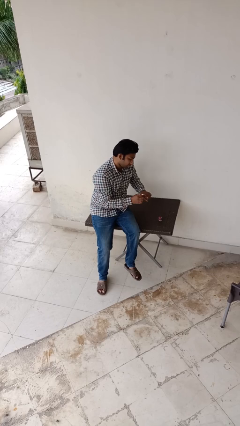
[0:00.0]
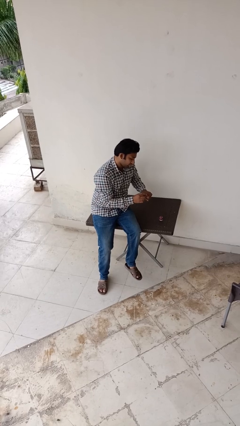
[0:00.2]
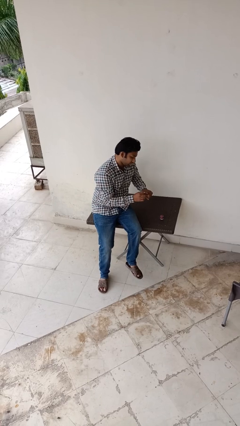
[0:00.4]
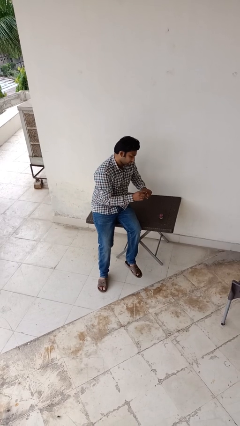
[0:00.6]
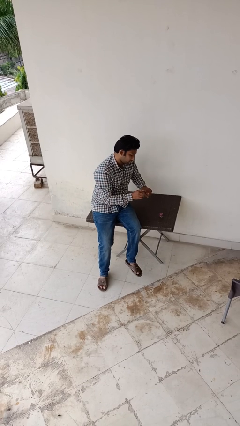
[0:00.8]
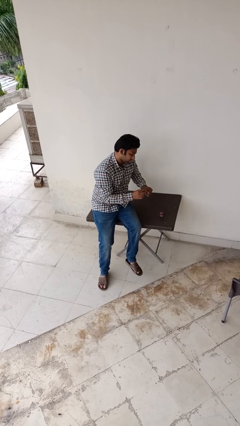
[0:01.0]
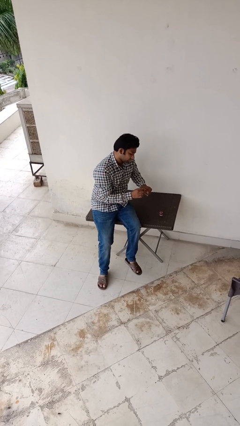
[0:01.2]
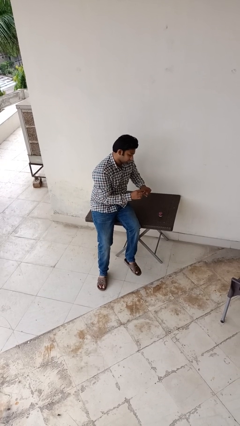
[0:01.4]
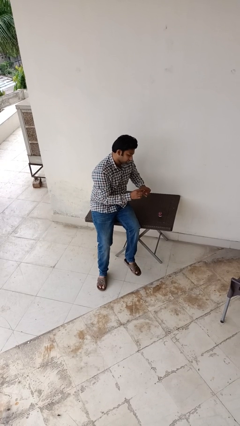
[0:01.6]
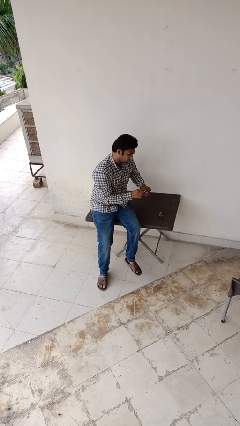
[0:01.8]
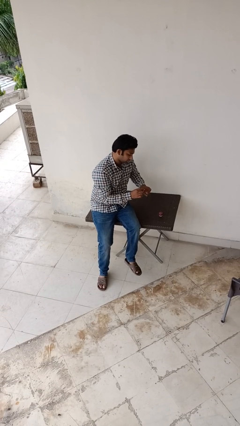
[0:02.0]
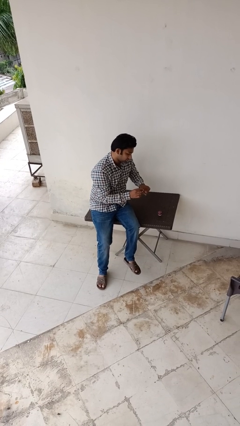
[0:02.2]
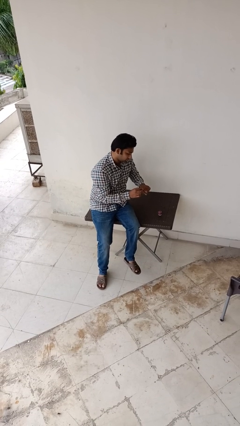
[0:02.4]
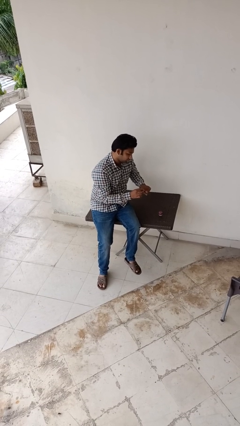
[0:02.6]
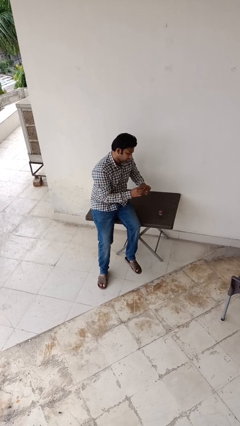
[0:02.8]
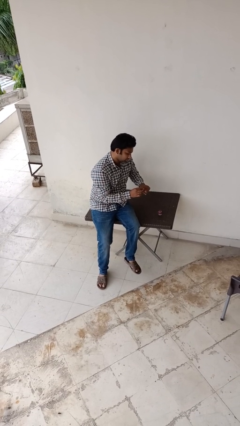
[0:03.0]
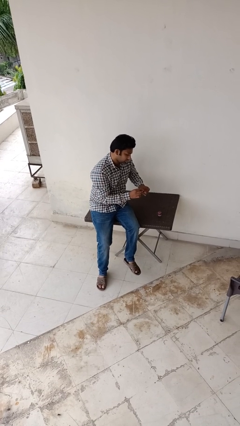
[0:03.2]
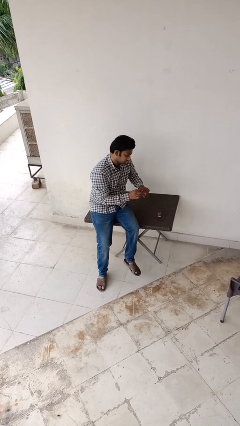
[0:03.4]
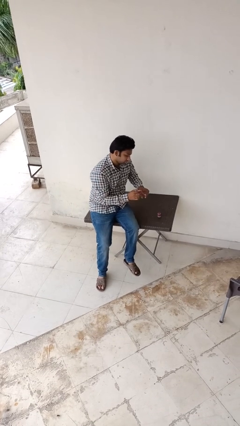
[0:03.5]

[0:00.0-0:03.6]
person paints fingernails

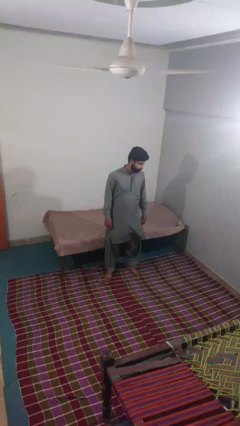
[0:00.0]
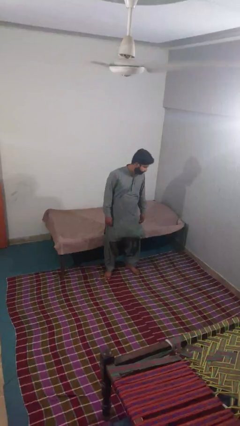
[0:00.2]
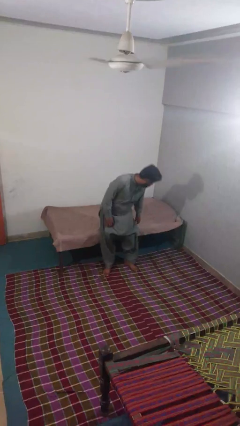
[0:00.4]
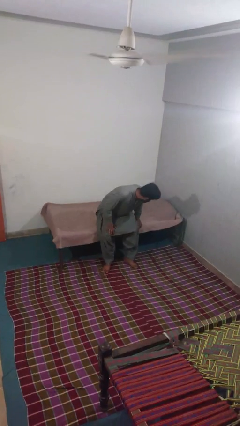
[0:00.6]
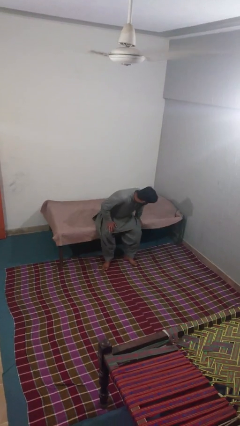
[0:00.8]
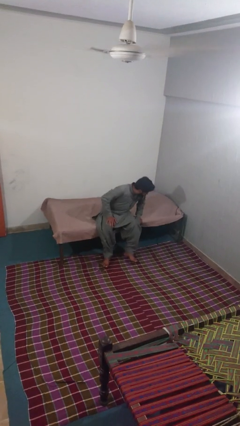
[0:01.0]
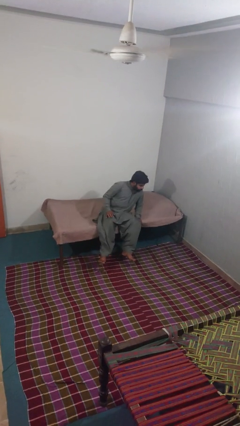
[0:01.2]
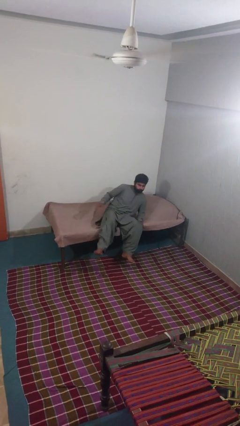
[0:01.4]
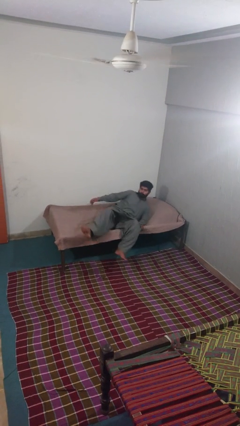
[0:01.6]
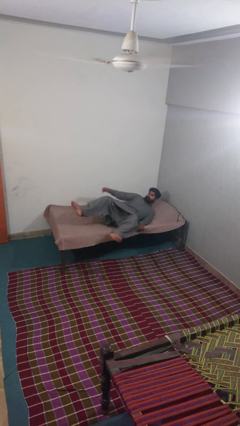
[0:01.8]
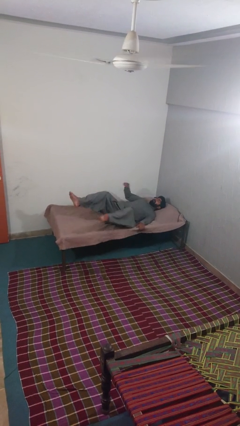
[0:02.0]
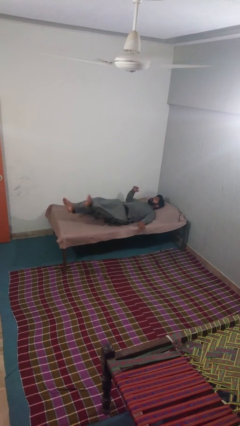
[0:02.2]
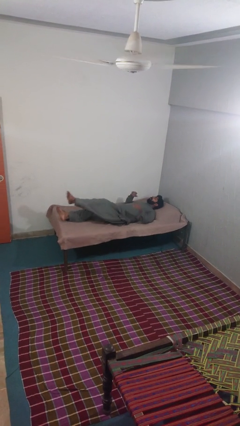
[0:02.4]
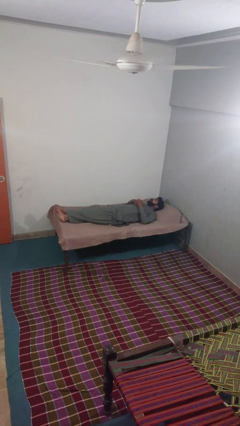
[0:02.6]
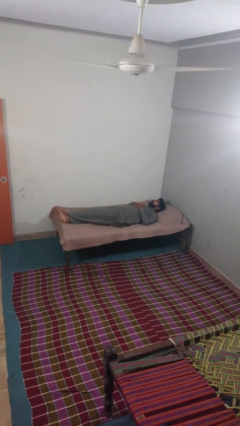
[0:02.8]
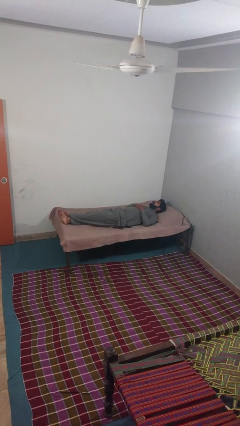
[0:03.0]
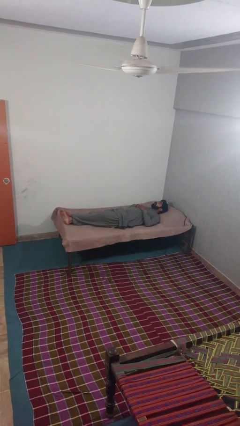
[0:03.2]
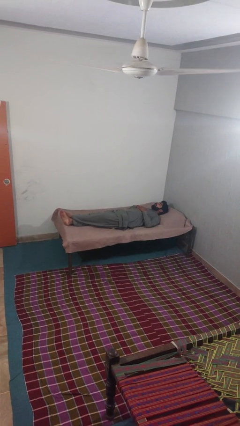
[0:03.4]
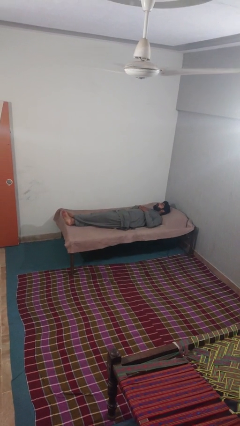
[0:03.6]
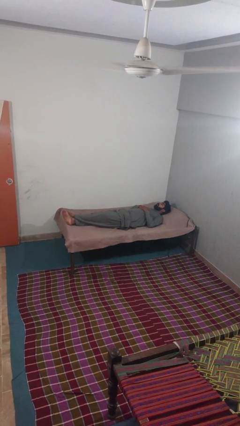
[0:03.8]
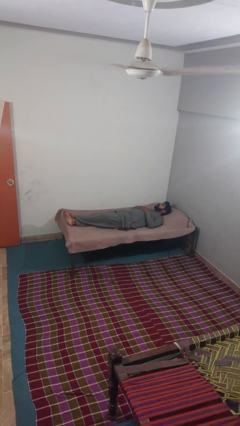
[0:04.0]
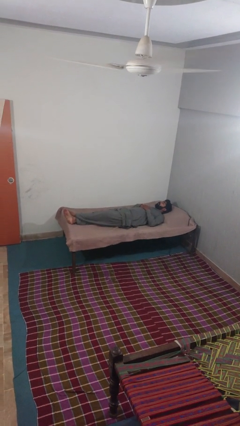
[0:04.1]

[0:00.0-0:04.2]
person lies down on bed

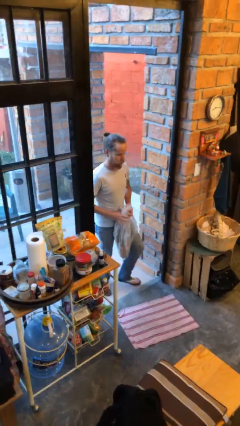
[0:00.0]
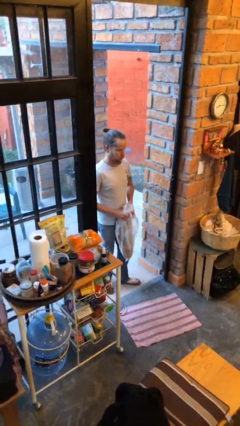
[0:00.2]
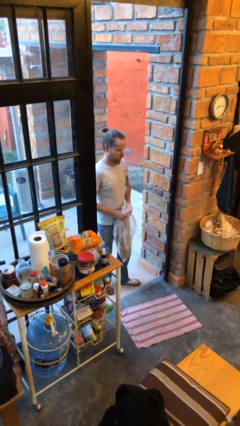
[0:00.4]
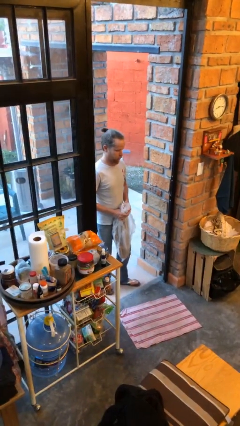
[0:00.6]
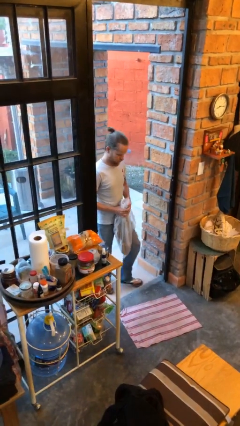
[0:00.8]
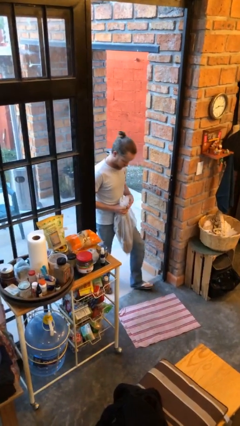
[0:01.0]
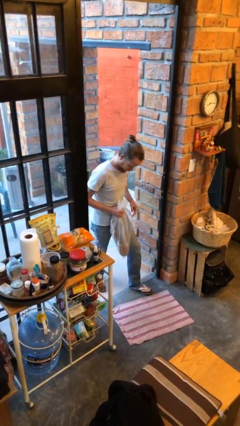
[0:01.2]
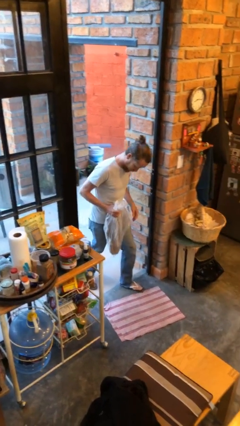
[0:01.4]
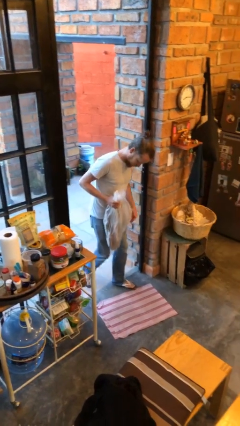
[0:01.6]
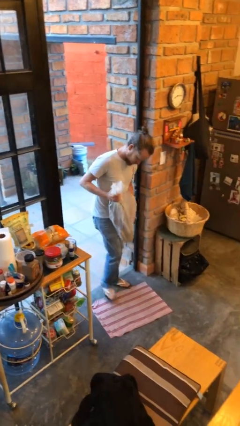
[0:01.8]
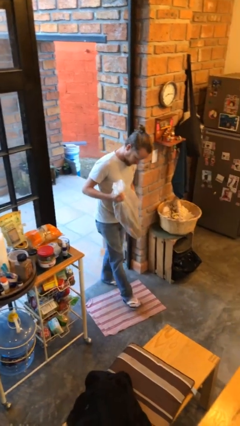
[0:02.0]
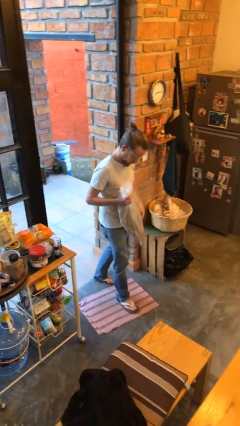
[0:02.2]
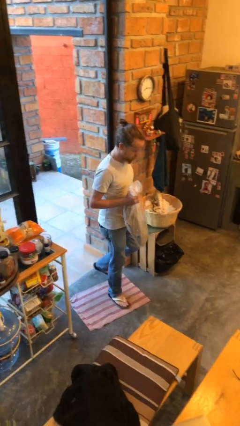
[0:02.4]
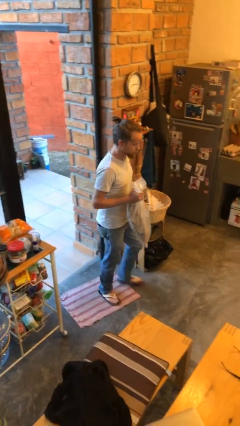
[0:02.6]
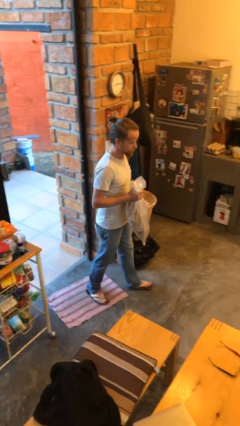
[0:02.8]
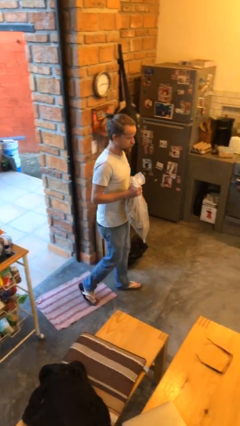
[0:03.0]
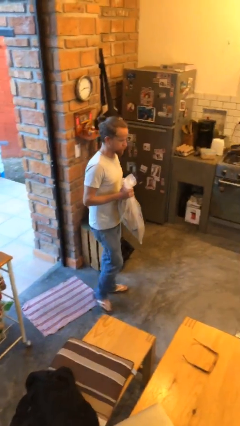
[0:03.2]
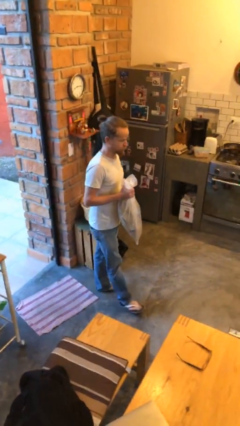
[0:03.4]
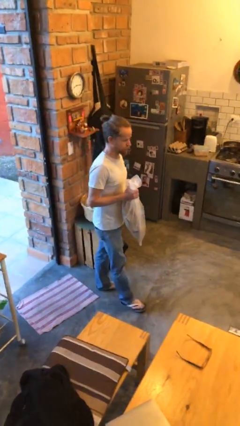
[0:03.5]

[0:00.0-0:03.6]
person carries groceries

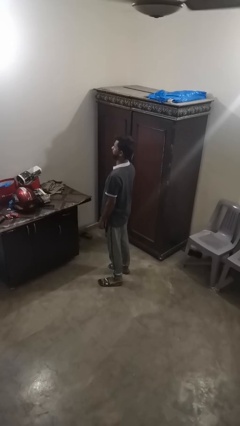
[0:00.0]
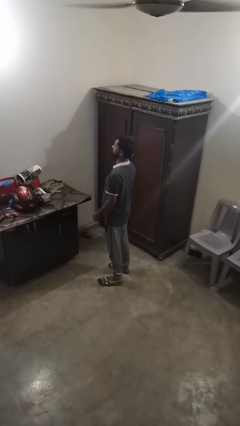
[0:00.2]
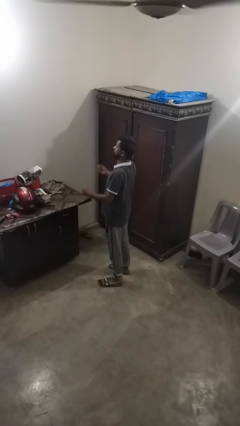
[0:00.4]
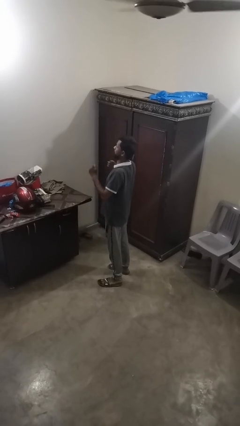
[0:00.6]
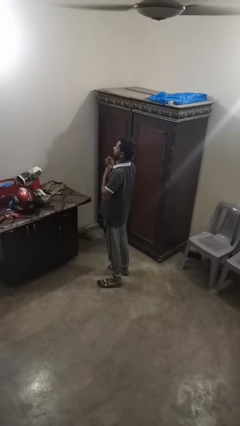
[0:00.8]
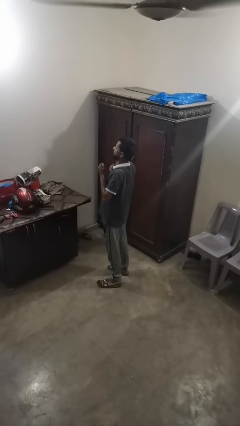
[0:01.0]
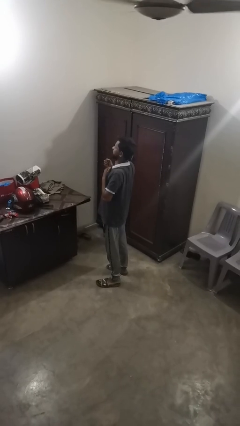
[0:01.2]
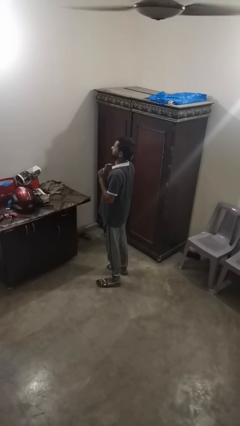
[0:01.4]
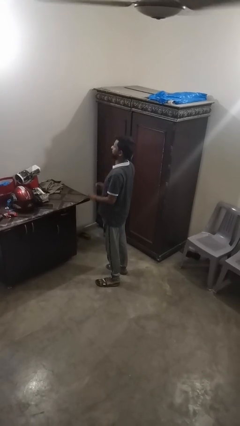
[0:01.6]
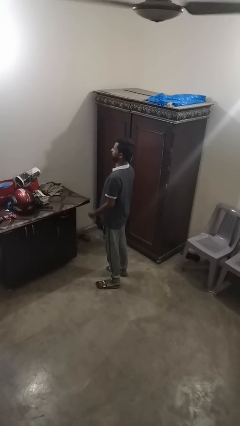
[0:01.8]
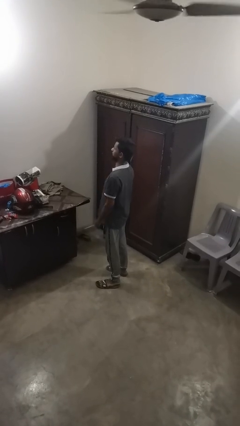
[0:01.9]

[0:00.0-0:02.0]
person drums on chest

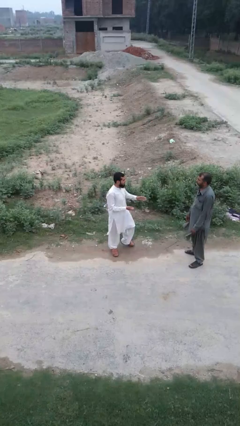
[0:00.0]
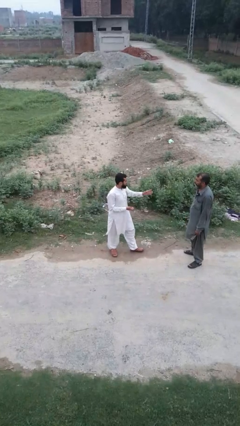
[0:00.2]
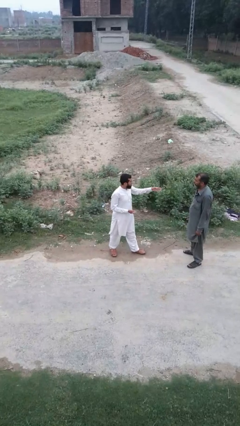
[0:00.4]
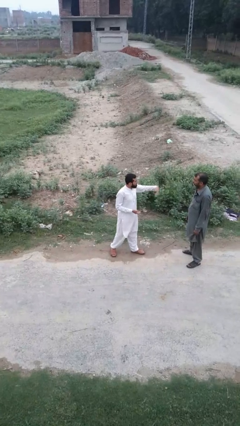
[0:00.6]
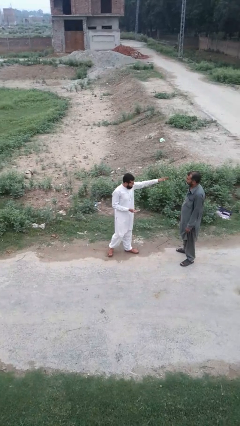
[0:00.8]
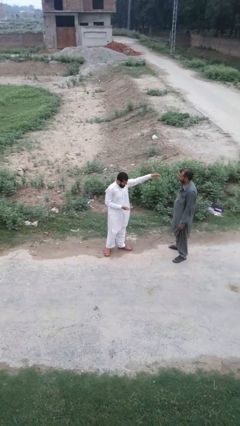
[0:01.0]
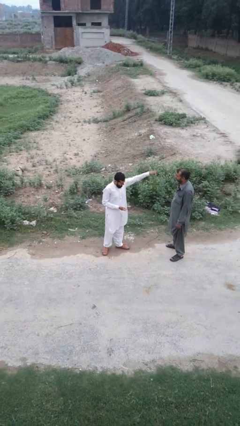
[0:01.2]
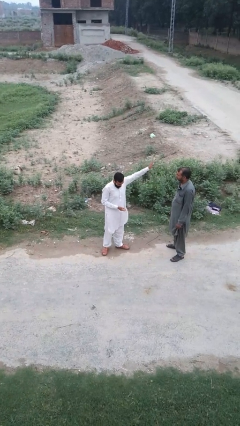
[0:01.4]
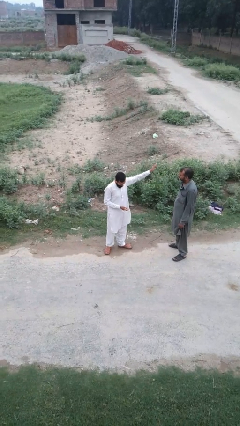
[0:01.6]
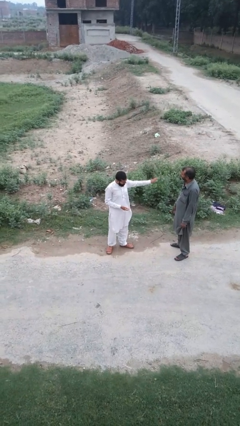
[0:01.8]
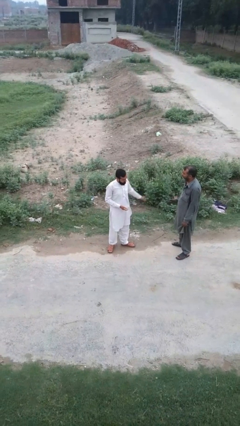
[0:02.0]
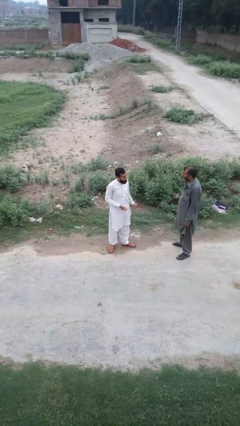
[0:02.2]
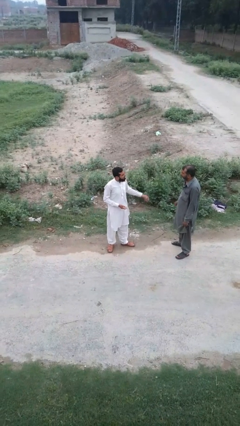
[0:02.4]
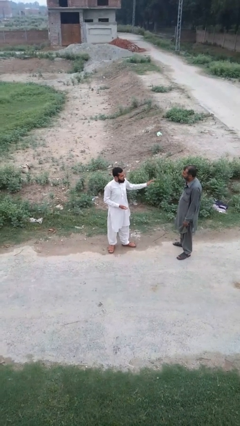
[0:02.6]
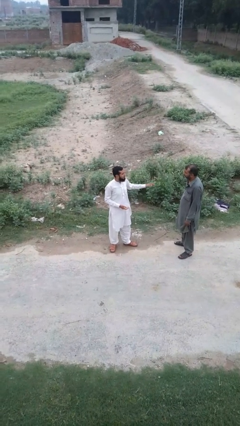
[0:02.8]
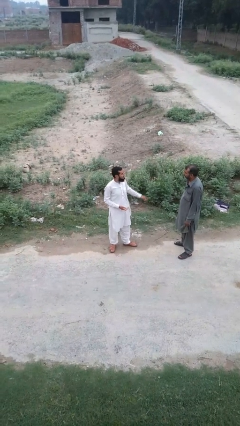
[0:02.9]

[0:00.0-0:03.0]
person shoves person

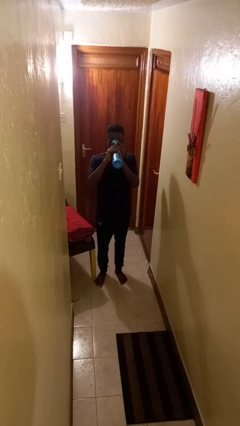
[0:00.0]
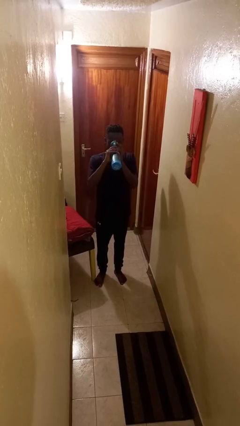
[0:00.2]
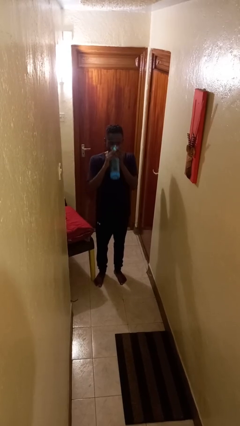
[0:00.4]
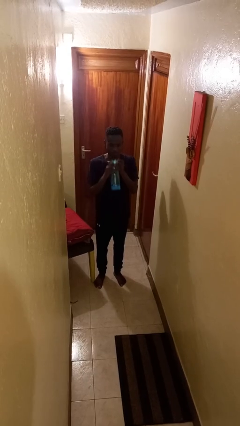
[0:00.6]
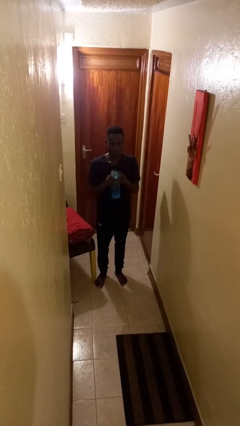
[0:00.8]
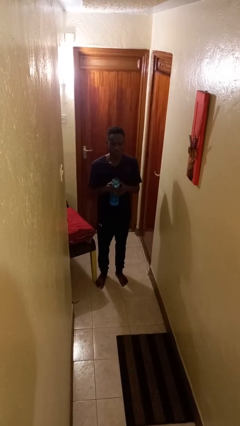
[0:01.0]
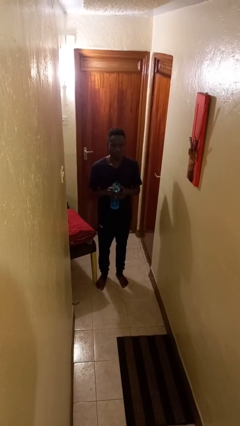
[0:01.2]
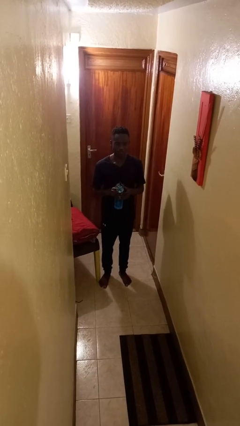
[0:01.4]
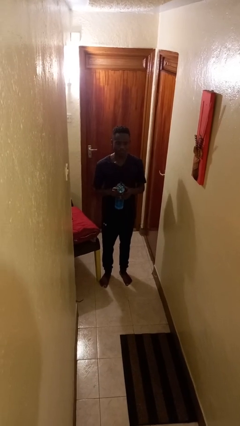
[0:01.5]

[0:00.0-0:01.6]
person drinks from bottle
